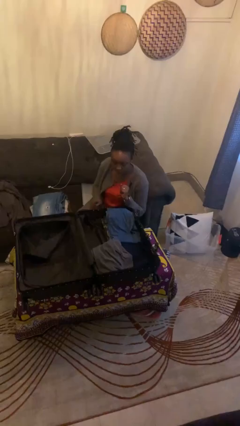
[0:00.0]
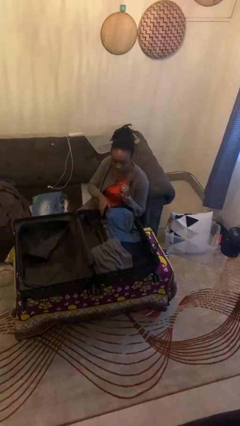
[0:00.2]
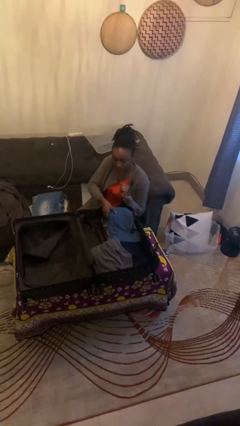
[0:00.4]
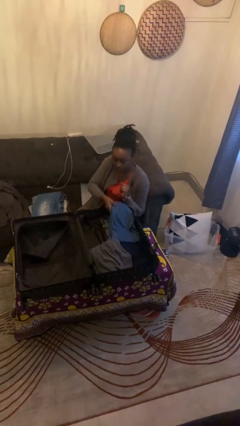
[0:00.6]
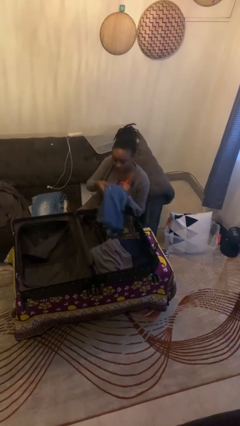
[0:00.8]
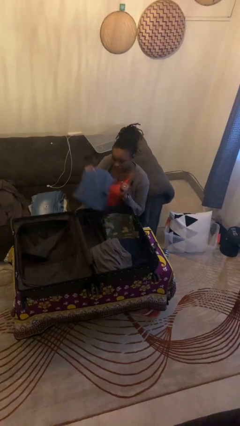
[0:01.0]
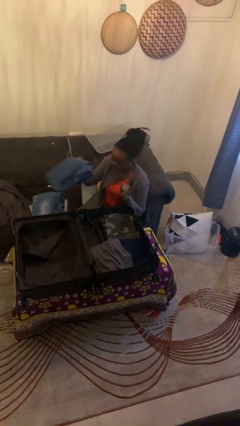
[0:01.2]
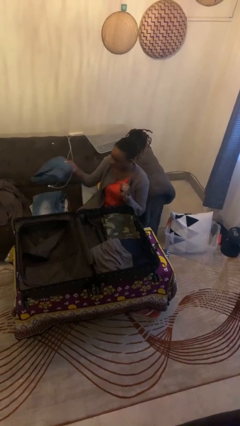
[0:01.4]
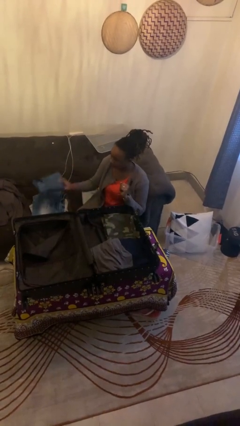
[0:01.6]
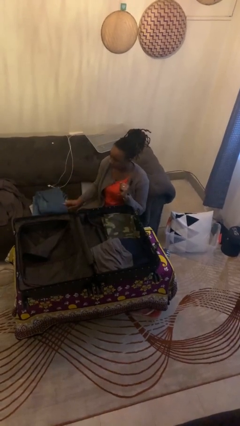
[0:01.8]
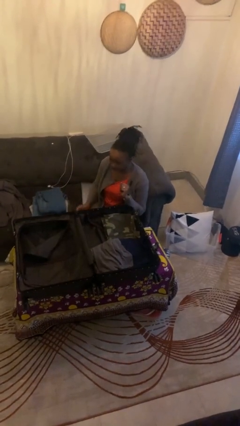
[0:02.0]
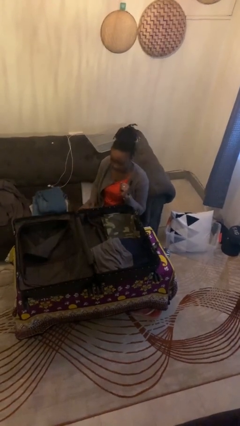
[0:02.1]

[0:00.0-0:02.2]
person unloads clothes from suitcase

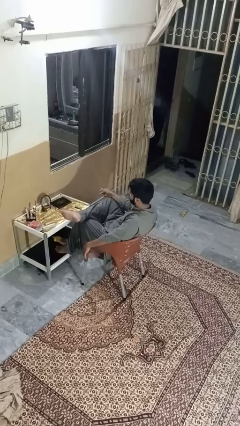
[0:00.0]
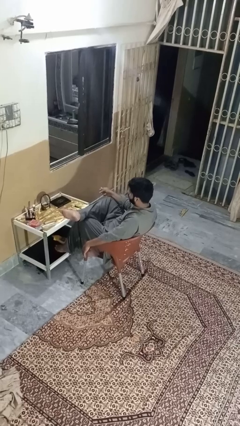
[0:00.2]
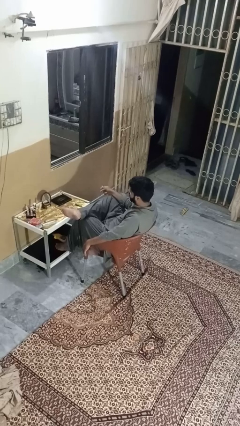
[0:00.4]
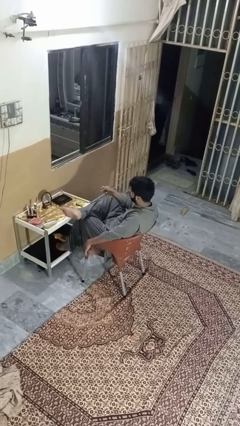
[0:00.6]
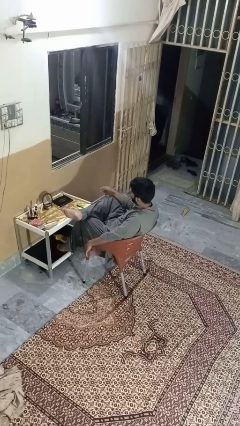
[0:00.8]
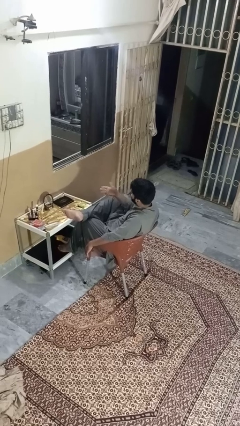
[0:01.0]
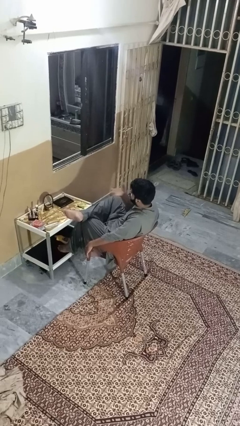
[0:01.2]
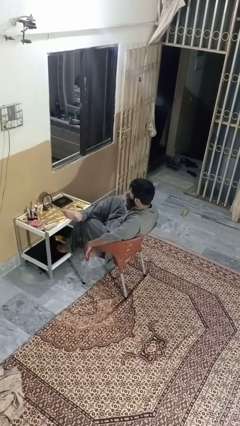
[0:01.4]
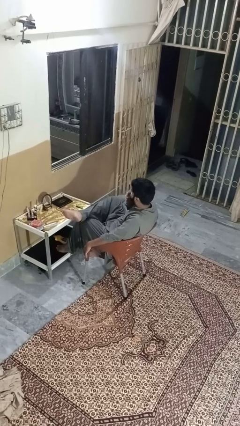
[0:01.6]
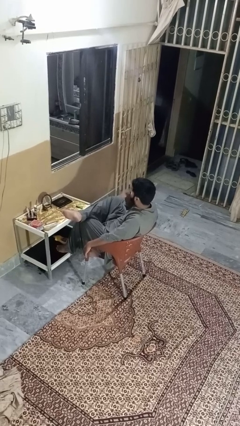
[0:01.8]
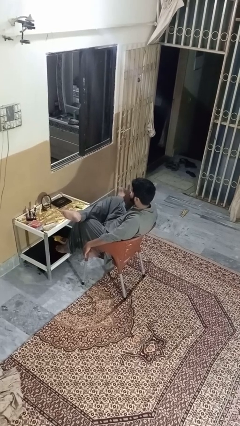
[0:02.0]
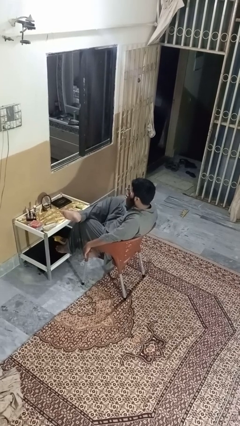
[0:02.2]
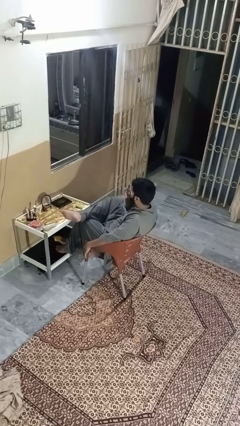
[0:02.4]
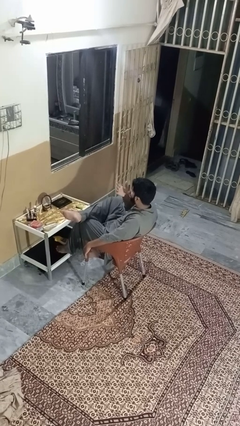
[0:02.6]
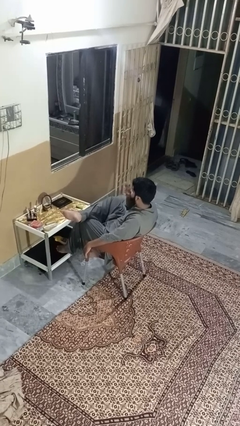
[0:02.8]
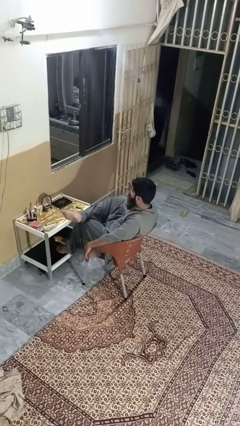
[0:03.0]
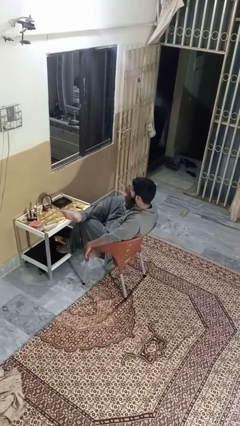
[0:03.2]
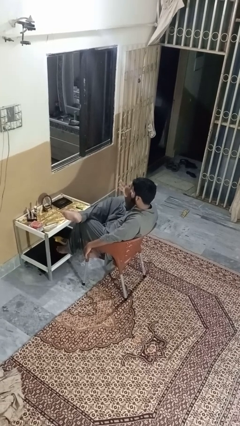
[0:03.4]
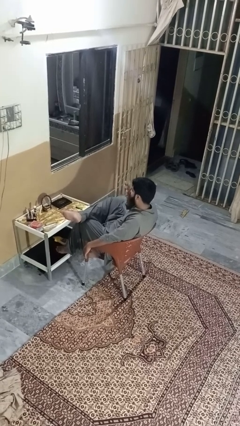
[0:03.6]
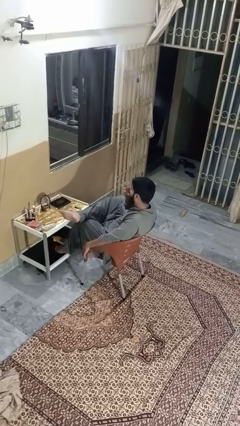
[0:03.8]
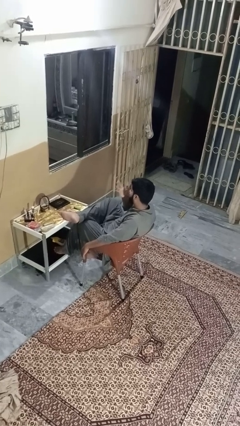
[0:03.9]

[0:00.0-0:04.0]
person licks fingers

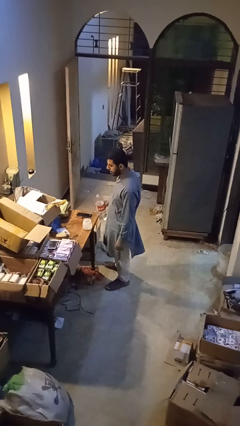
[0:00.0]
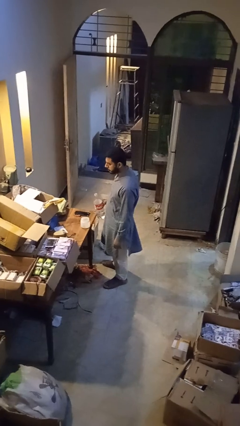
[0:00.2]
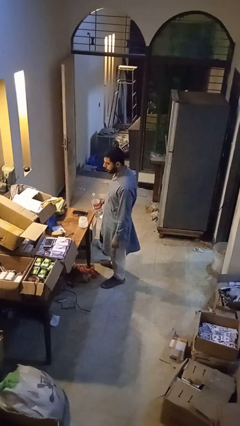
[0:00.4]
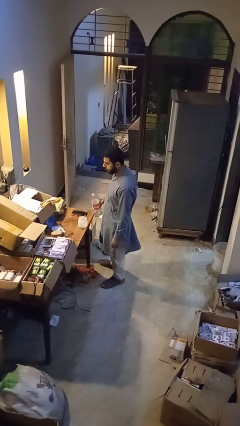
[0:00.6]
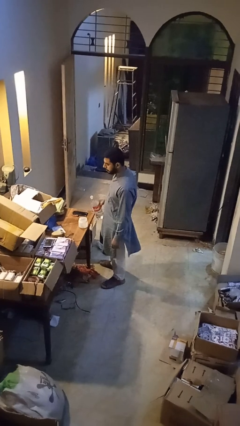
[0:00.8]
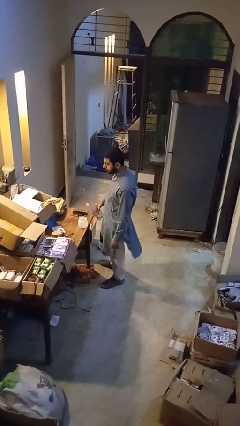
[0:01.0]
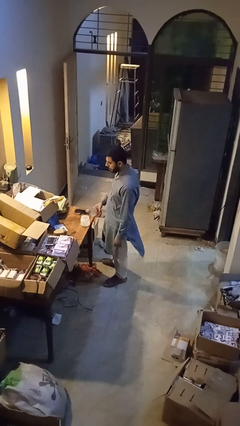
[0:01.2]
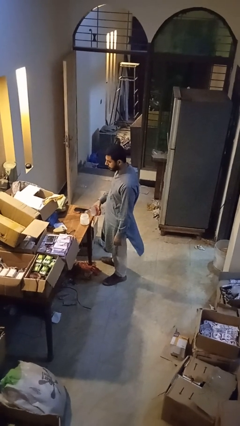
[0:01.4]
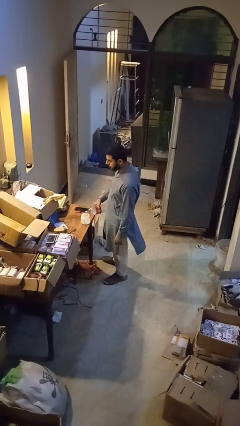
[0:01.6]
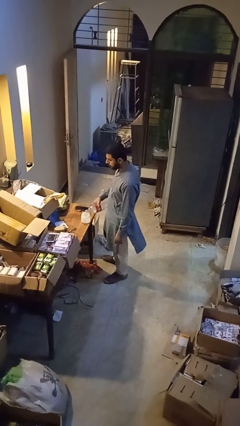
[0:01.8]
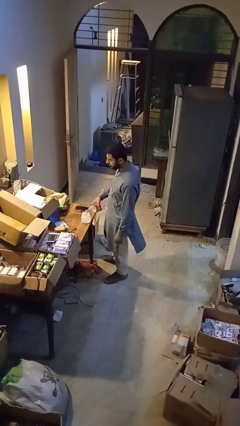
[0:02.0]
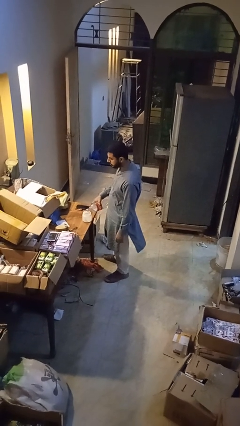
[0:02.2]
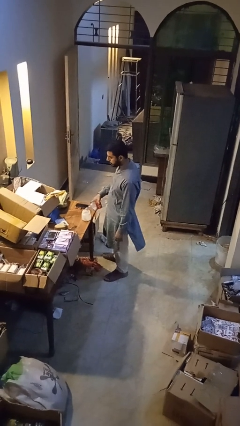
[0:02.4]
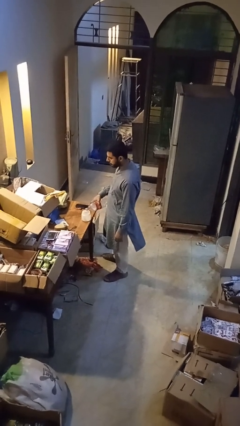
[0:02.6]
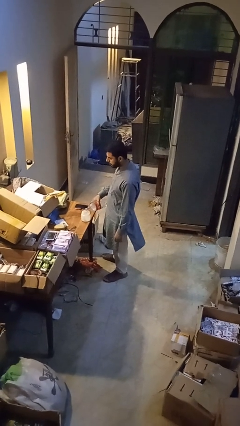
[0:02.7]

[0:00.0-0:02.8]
person pours liquid into cup

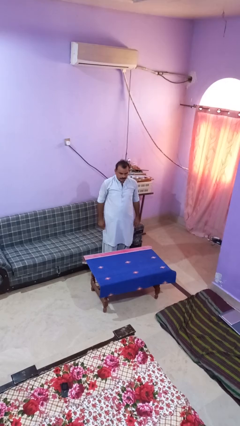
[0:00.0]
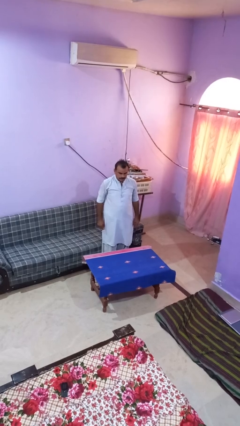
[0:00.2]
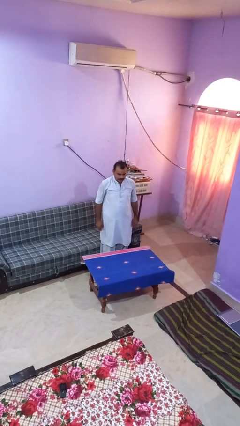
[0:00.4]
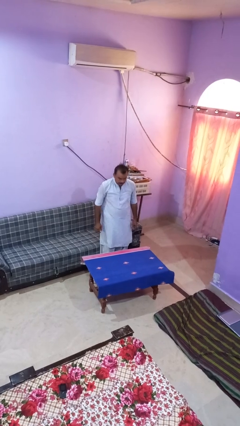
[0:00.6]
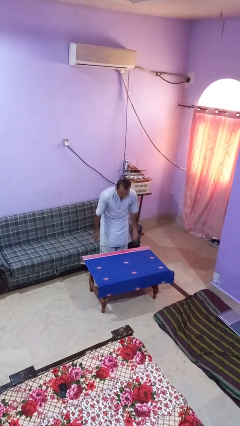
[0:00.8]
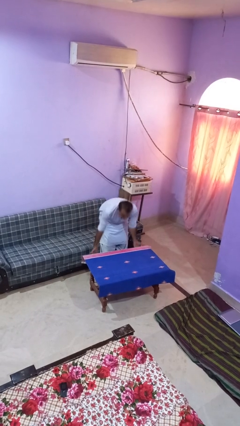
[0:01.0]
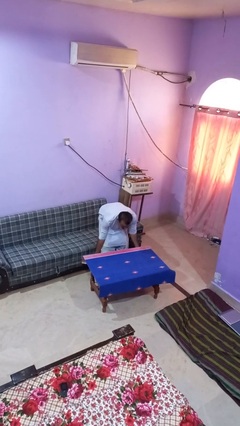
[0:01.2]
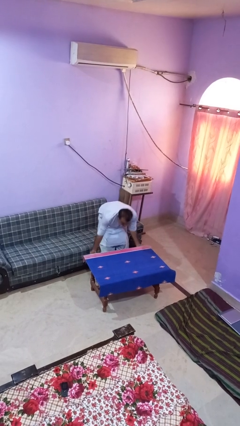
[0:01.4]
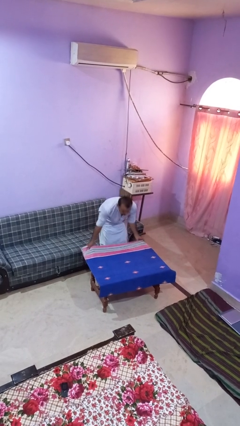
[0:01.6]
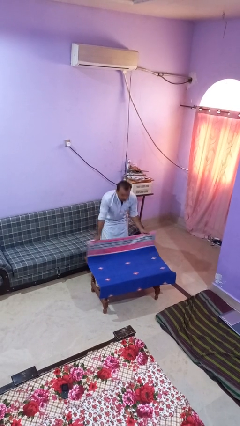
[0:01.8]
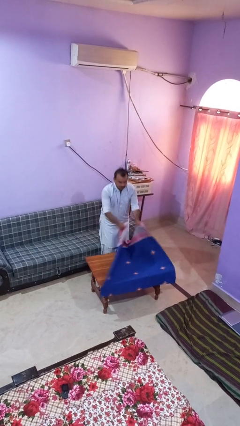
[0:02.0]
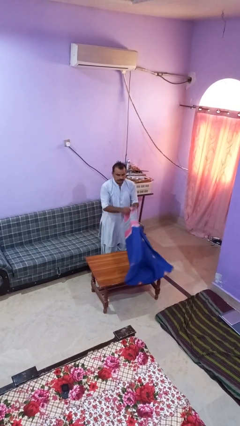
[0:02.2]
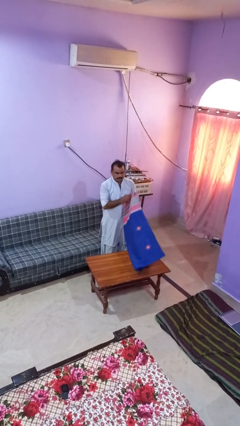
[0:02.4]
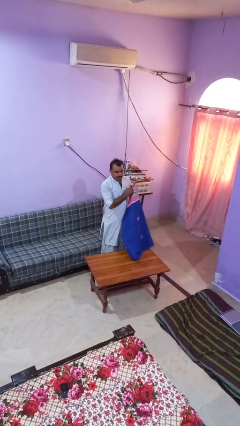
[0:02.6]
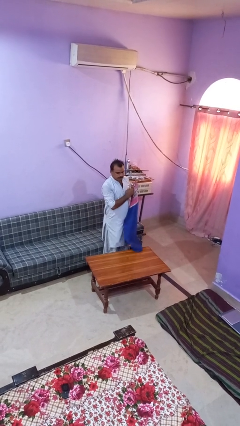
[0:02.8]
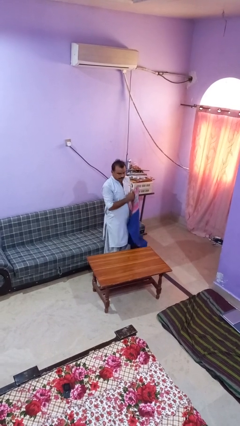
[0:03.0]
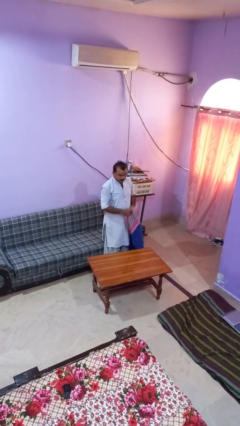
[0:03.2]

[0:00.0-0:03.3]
person folds tablecloth

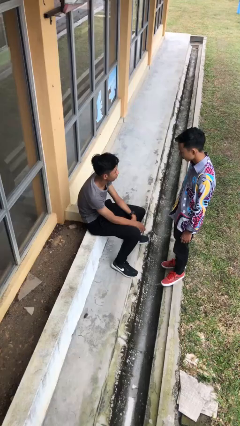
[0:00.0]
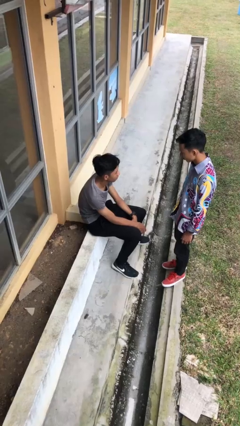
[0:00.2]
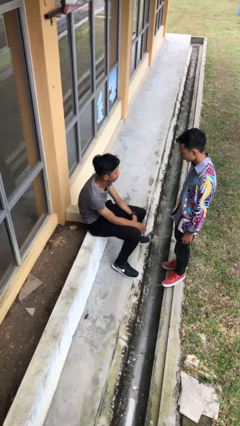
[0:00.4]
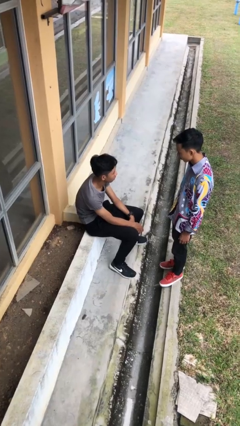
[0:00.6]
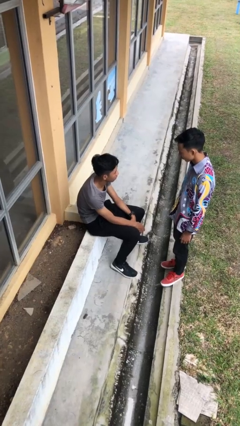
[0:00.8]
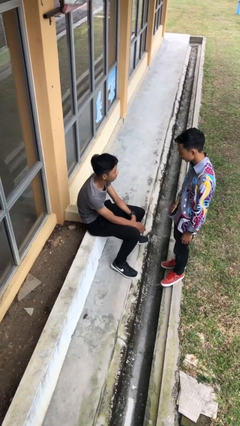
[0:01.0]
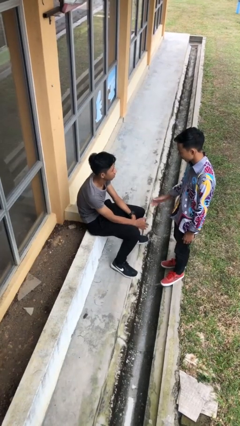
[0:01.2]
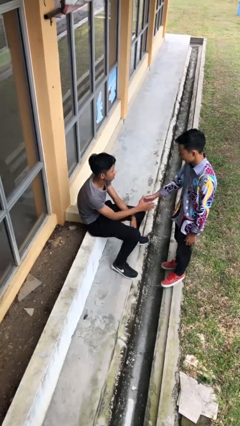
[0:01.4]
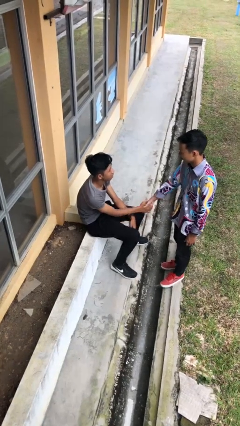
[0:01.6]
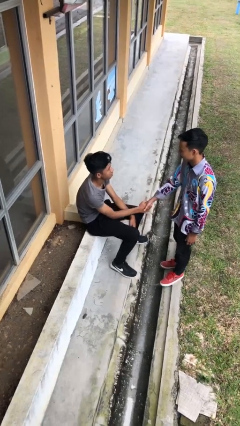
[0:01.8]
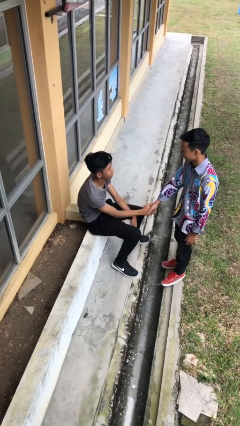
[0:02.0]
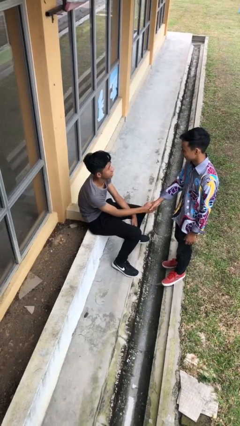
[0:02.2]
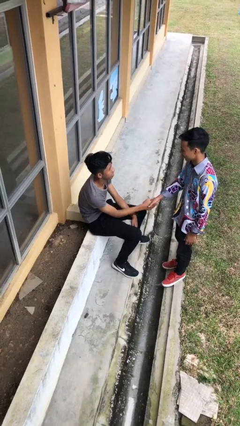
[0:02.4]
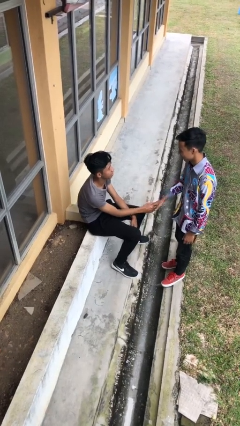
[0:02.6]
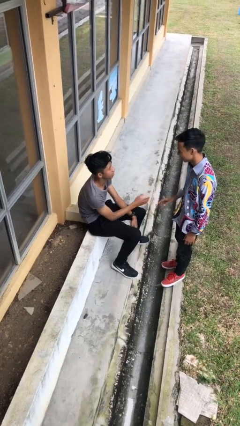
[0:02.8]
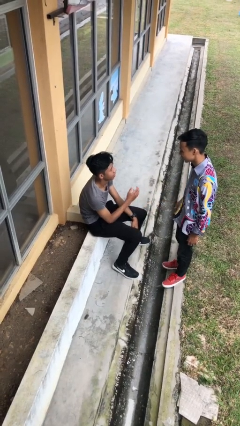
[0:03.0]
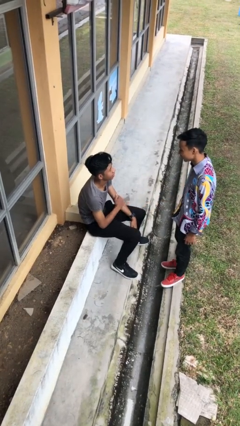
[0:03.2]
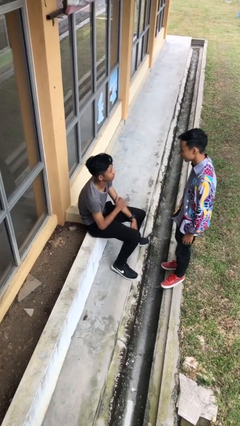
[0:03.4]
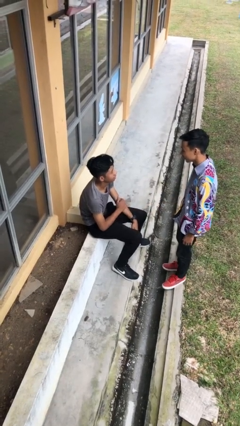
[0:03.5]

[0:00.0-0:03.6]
person shakes hand

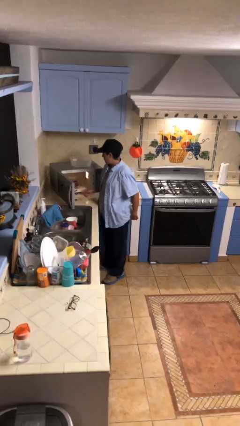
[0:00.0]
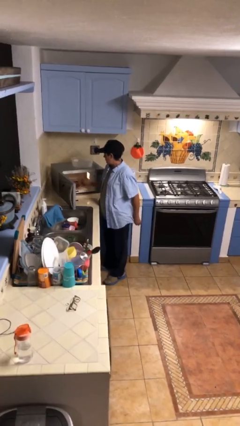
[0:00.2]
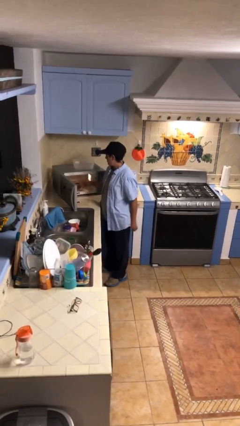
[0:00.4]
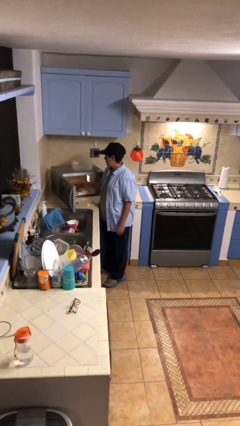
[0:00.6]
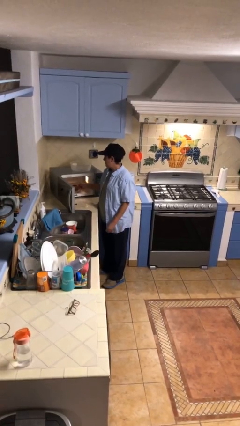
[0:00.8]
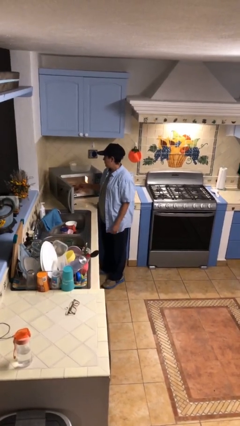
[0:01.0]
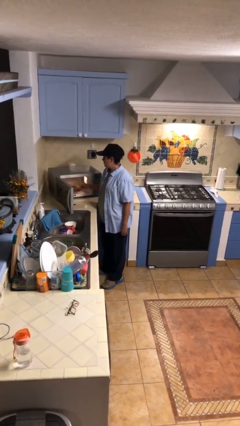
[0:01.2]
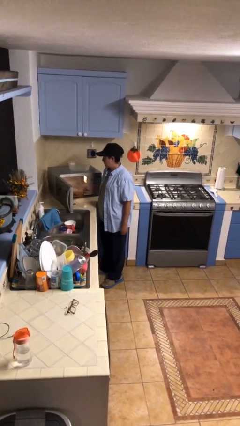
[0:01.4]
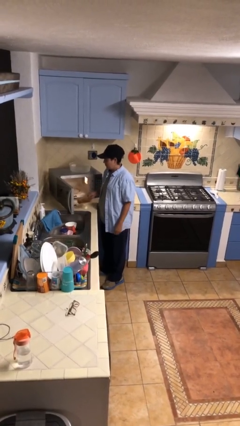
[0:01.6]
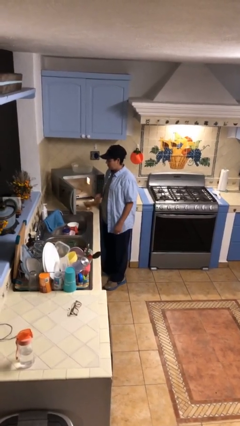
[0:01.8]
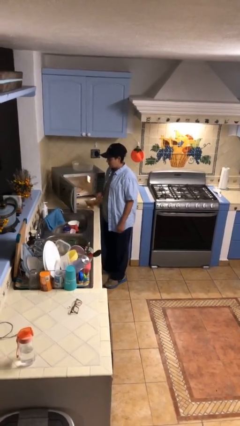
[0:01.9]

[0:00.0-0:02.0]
person takes object from microwave
